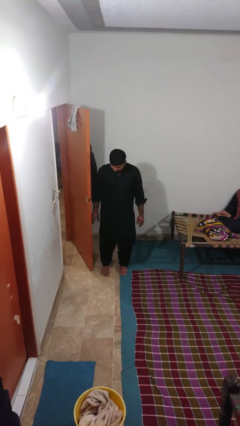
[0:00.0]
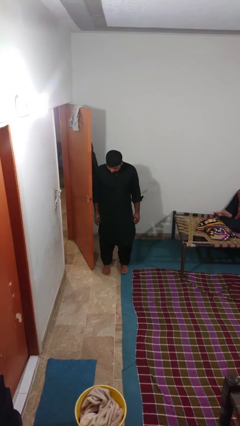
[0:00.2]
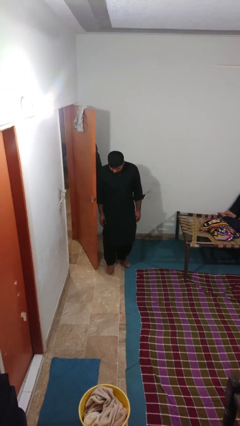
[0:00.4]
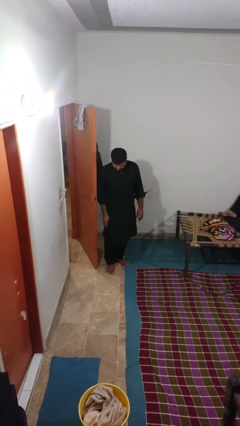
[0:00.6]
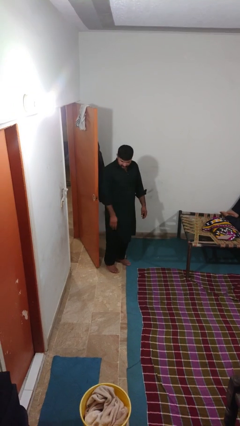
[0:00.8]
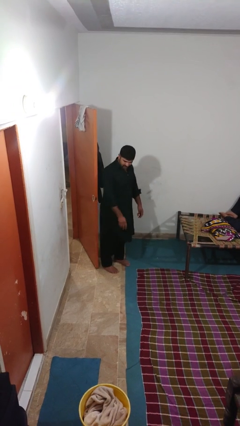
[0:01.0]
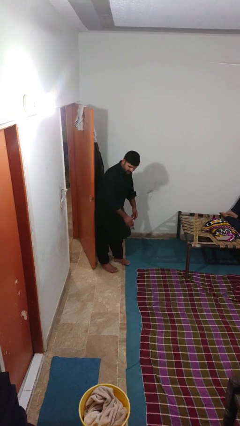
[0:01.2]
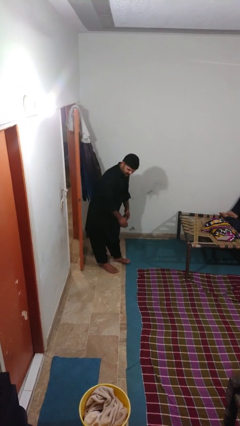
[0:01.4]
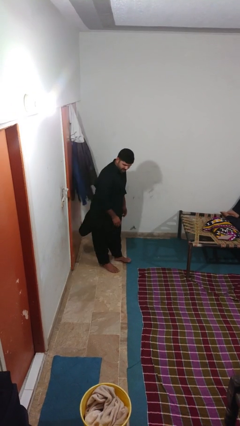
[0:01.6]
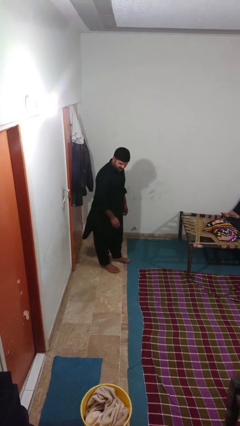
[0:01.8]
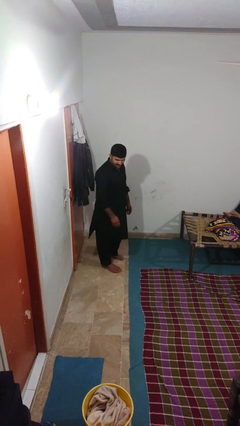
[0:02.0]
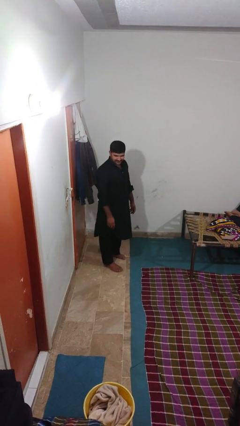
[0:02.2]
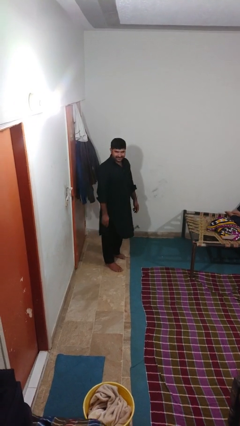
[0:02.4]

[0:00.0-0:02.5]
person closes door with hip

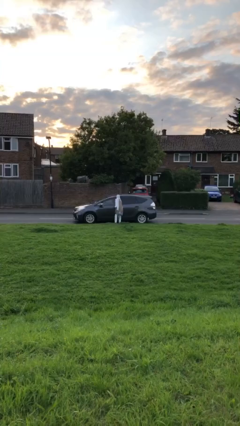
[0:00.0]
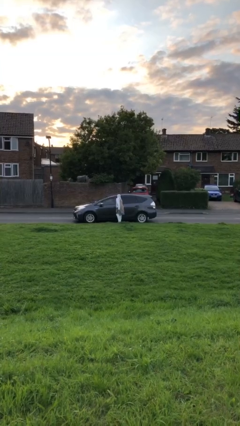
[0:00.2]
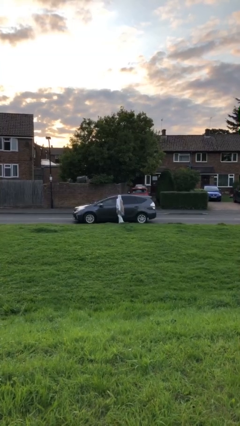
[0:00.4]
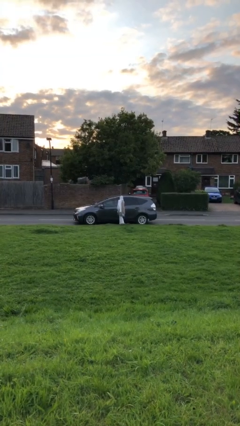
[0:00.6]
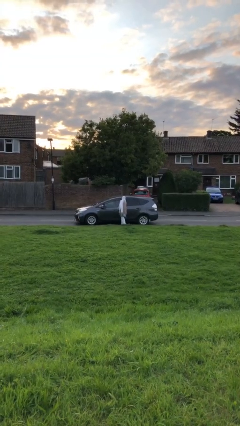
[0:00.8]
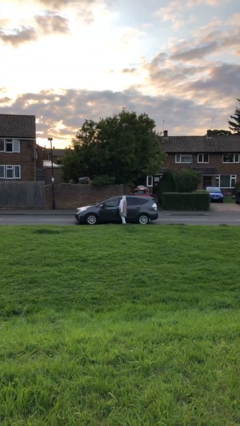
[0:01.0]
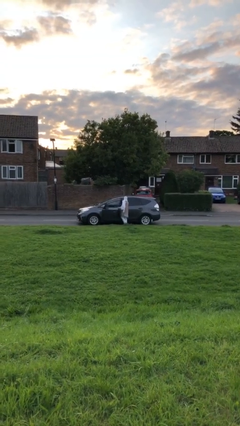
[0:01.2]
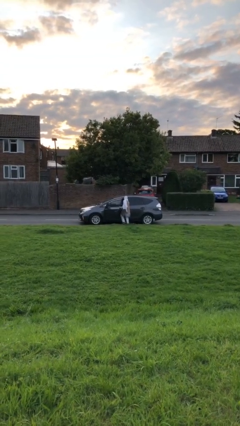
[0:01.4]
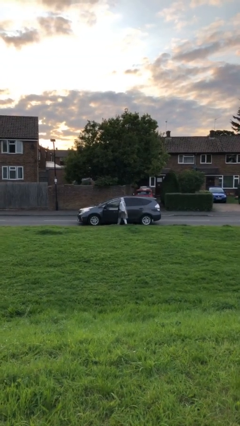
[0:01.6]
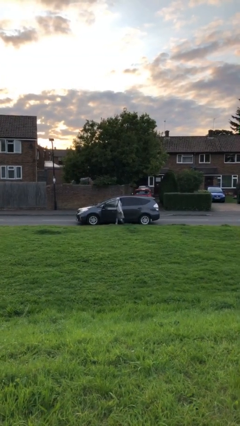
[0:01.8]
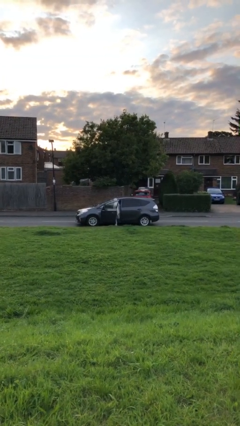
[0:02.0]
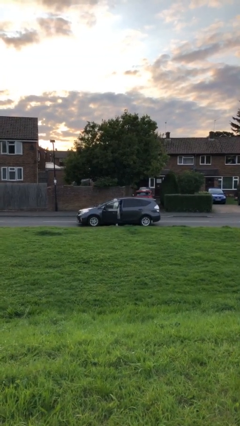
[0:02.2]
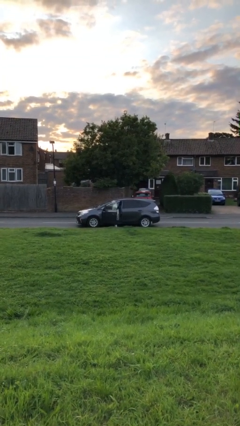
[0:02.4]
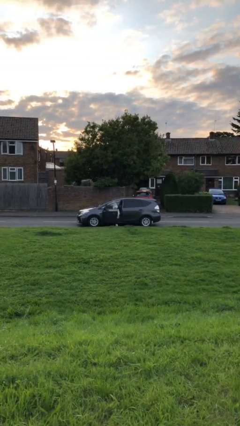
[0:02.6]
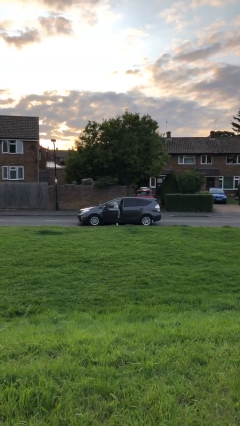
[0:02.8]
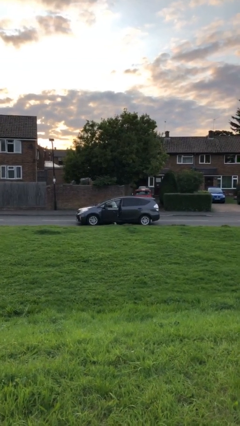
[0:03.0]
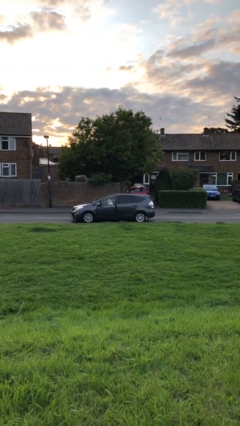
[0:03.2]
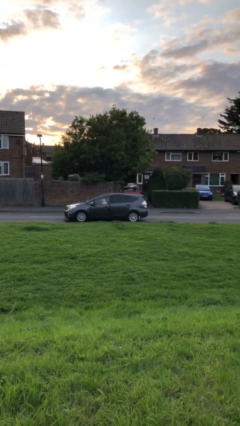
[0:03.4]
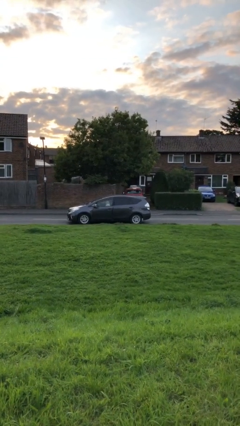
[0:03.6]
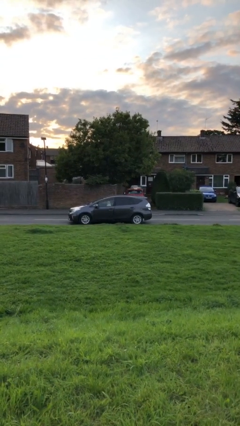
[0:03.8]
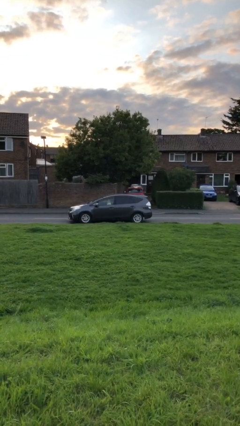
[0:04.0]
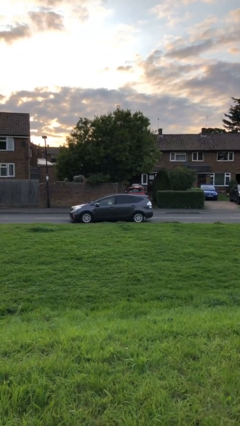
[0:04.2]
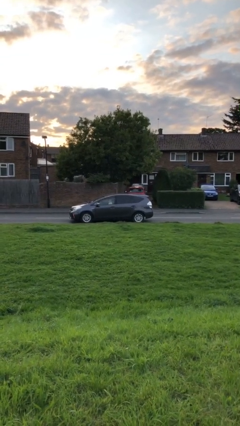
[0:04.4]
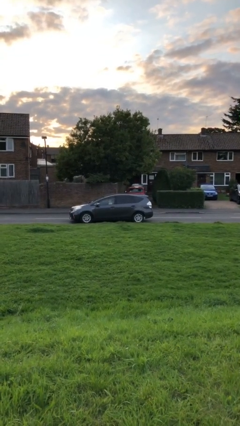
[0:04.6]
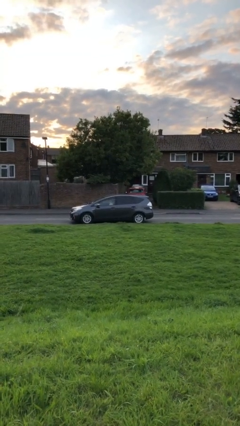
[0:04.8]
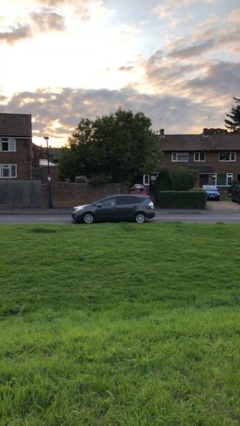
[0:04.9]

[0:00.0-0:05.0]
car picks up person

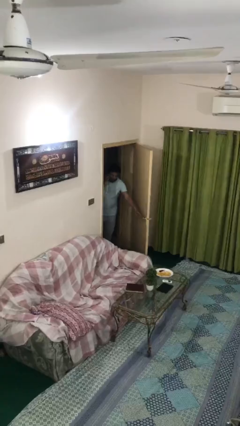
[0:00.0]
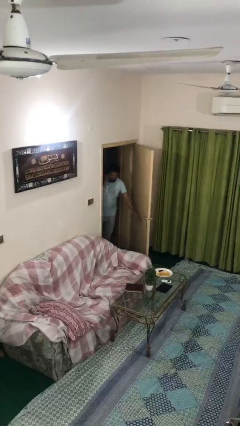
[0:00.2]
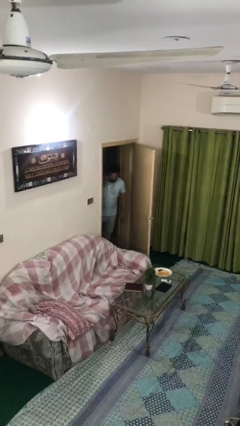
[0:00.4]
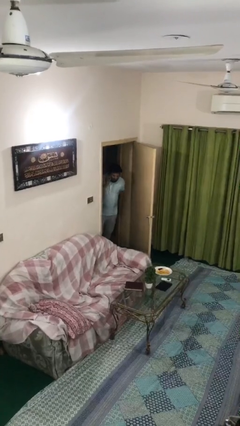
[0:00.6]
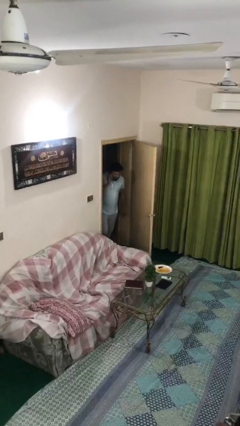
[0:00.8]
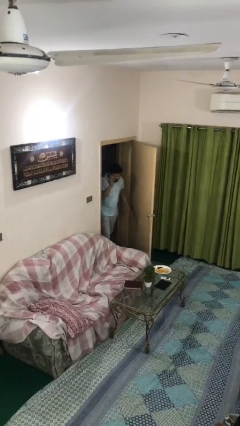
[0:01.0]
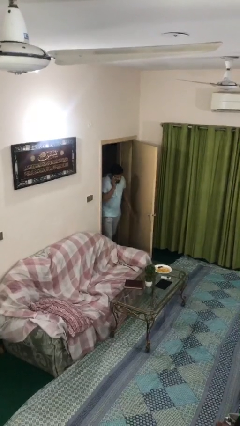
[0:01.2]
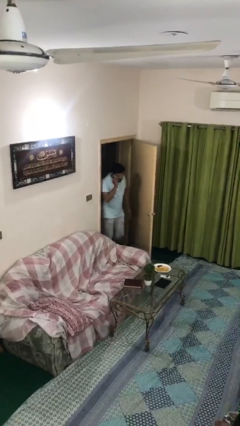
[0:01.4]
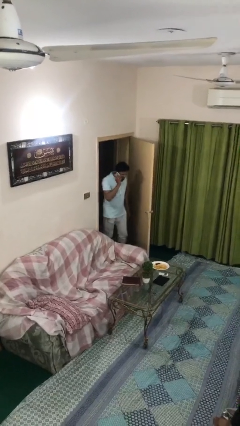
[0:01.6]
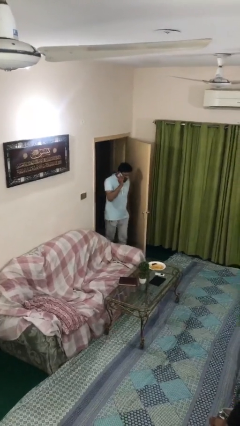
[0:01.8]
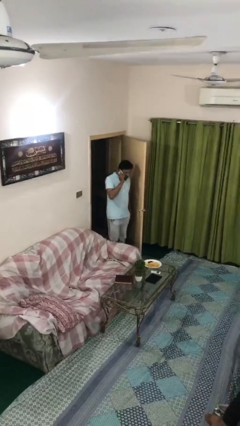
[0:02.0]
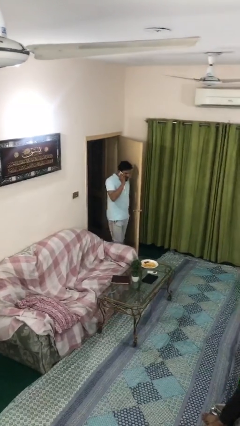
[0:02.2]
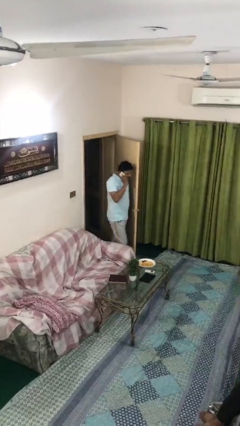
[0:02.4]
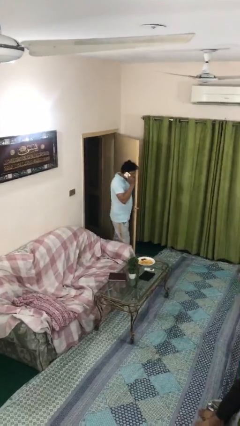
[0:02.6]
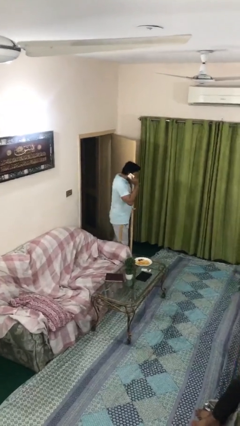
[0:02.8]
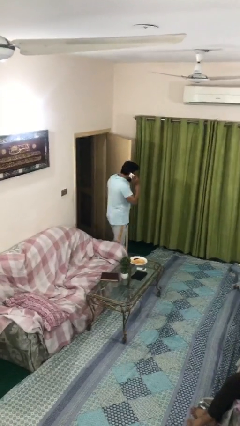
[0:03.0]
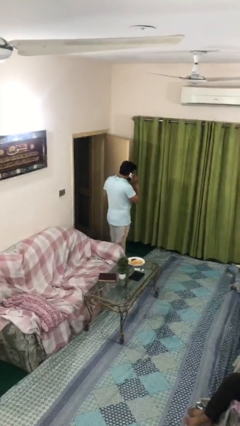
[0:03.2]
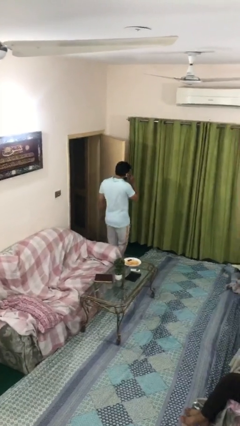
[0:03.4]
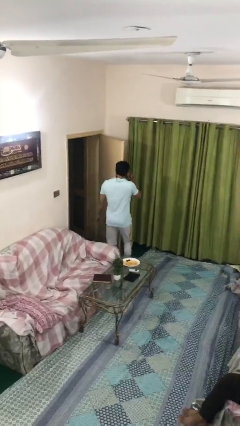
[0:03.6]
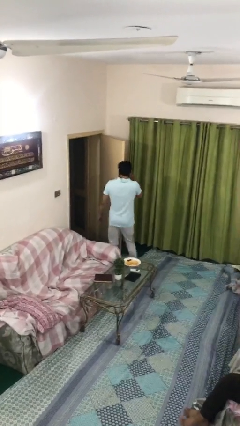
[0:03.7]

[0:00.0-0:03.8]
person enters scene through structure

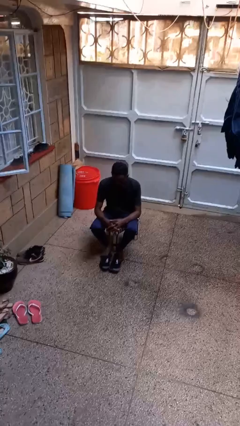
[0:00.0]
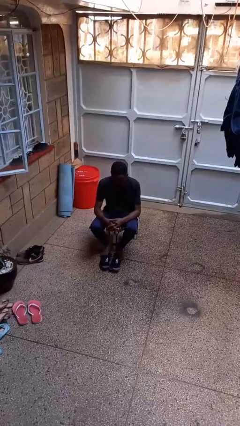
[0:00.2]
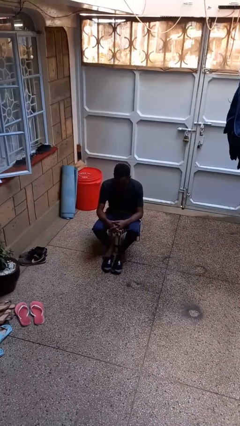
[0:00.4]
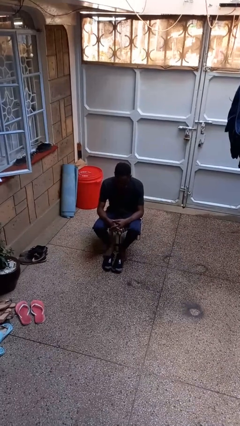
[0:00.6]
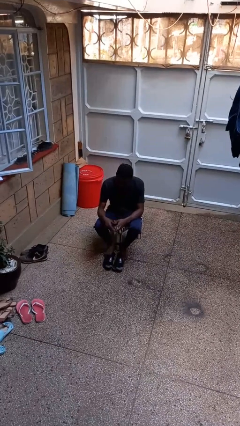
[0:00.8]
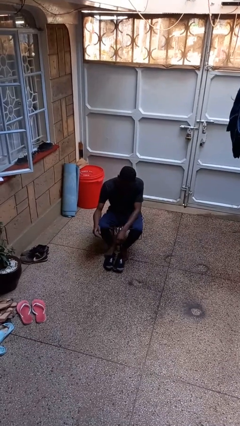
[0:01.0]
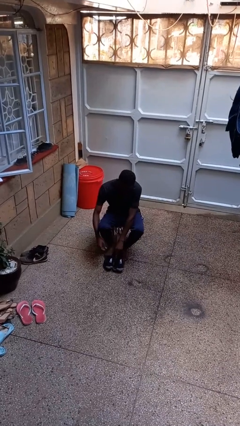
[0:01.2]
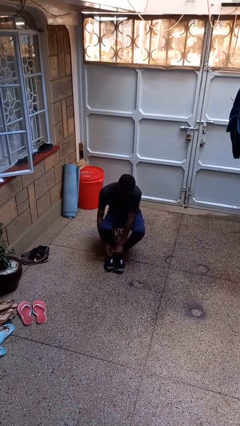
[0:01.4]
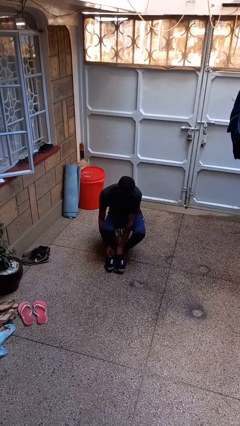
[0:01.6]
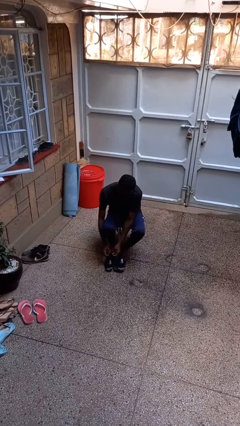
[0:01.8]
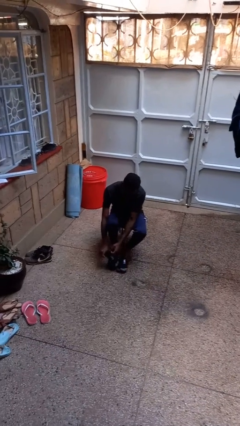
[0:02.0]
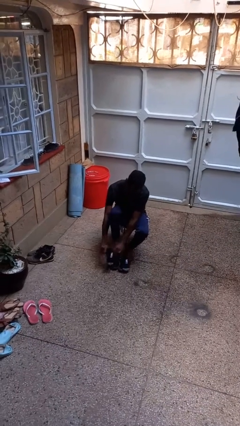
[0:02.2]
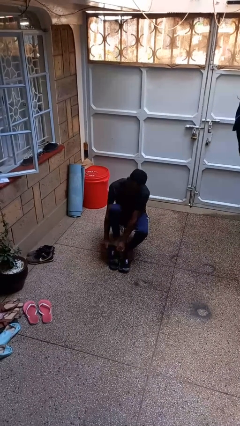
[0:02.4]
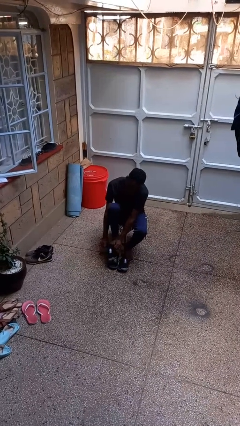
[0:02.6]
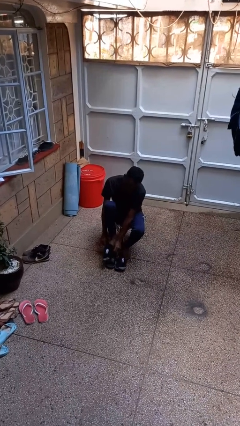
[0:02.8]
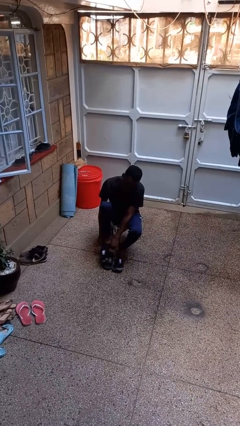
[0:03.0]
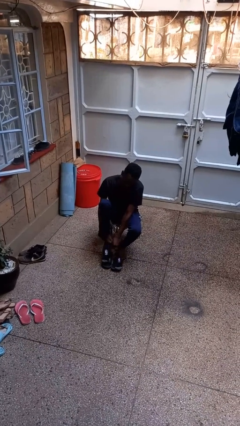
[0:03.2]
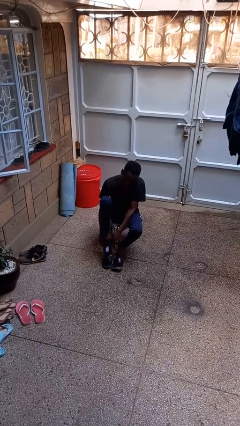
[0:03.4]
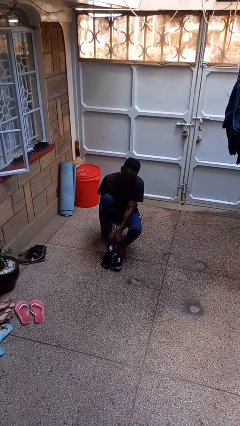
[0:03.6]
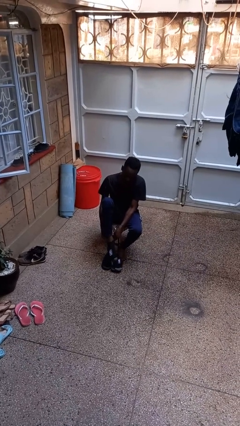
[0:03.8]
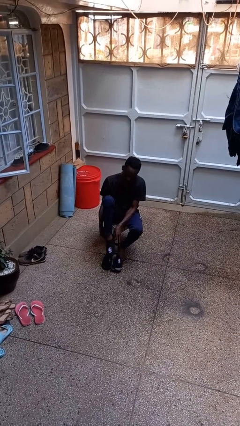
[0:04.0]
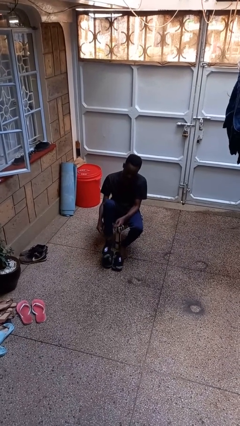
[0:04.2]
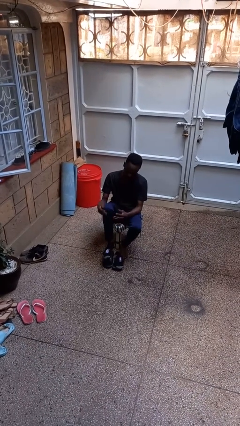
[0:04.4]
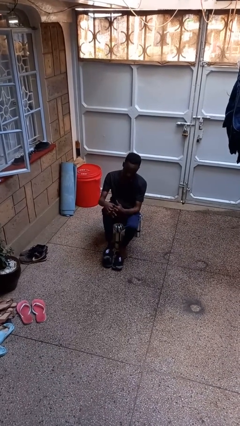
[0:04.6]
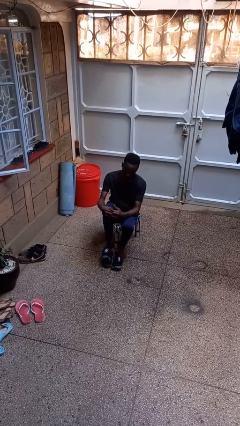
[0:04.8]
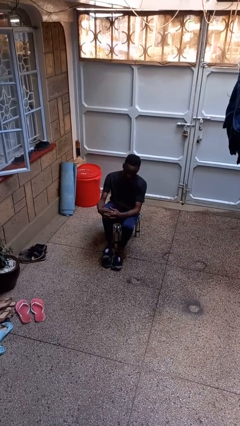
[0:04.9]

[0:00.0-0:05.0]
person puts on socks

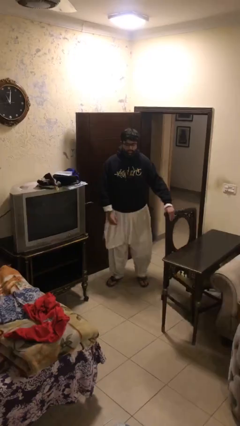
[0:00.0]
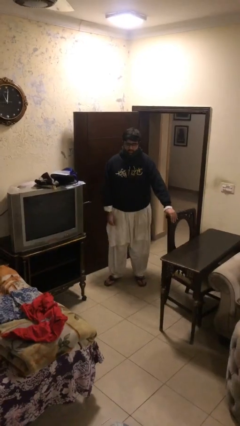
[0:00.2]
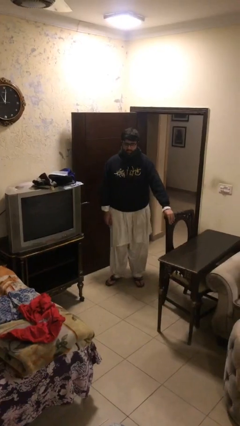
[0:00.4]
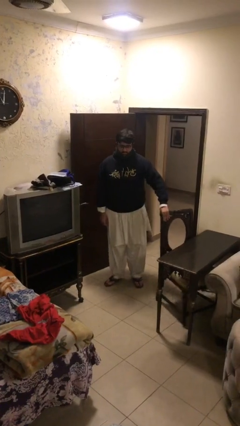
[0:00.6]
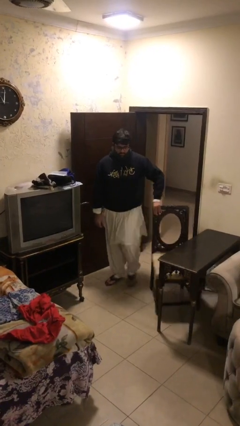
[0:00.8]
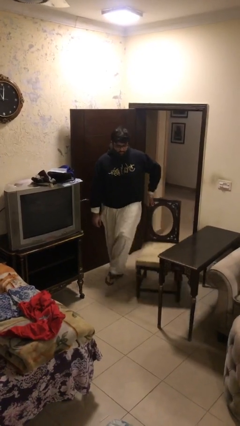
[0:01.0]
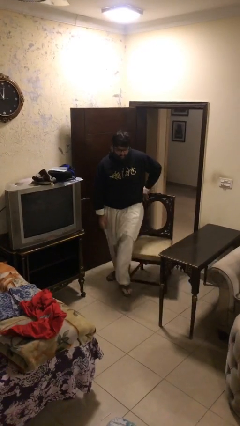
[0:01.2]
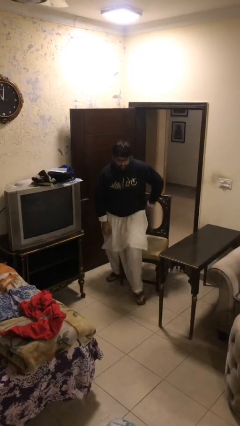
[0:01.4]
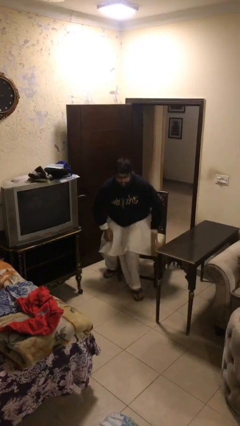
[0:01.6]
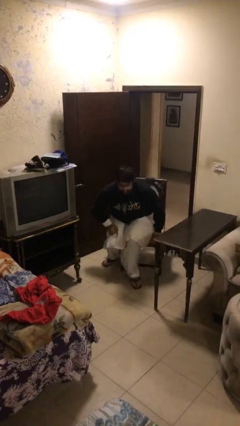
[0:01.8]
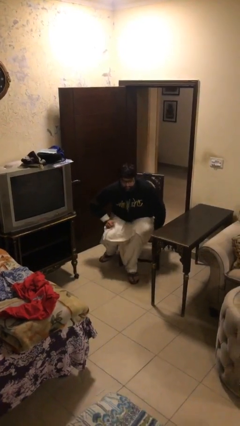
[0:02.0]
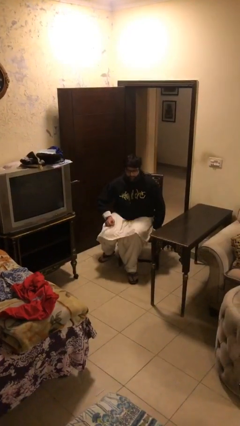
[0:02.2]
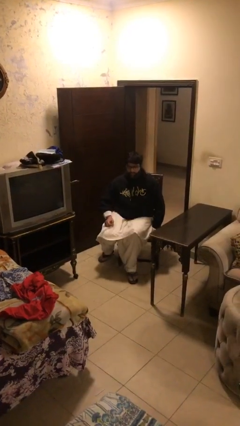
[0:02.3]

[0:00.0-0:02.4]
person sits down
